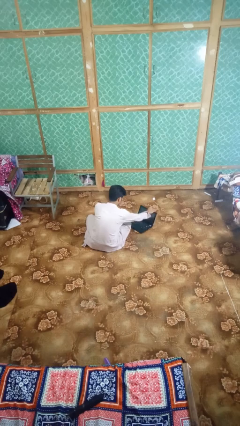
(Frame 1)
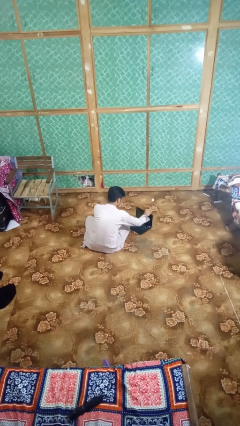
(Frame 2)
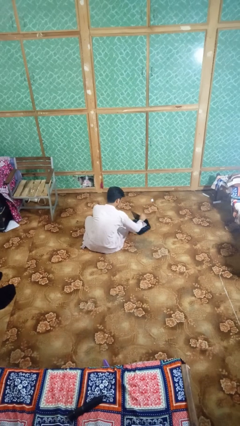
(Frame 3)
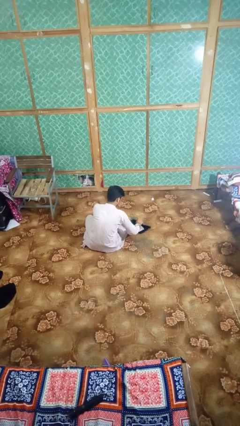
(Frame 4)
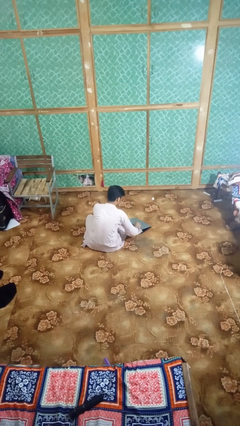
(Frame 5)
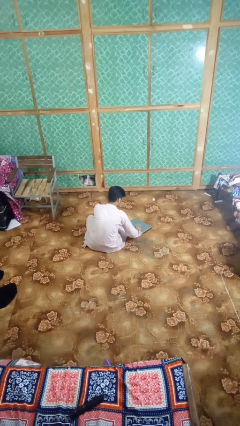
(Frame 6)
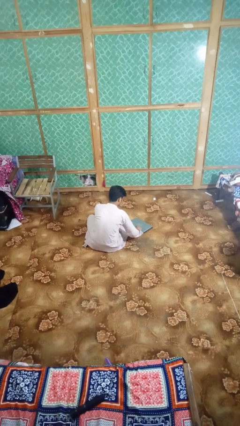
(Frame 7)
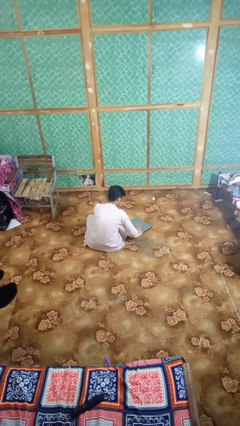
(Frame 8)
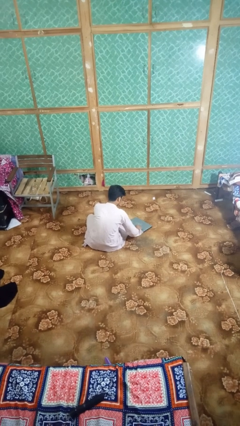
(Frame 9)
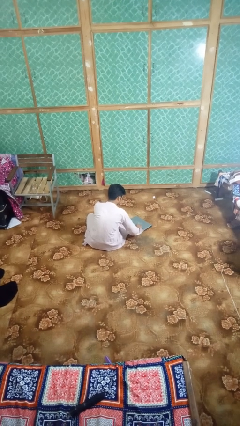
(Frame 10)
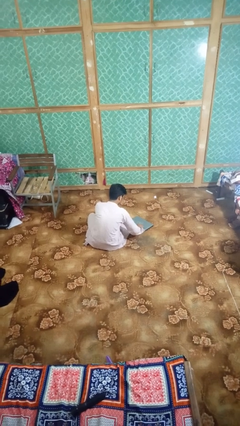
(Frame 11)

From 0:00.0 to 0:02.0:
person closes laptop

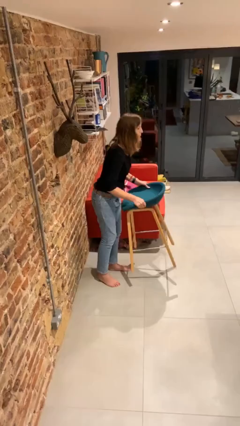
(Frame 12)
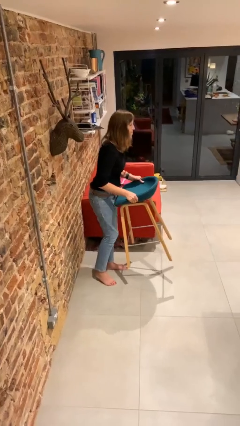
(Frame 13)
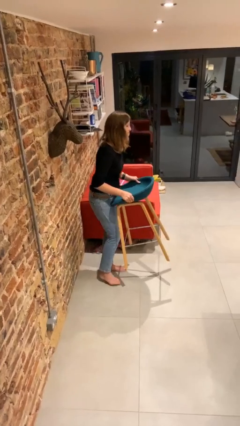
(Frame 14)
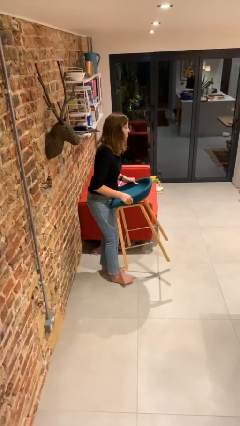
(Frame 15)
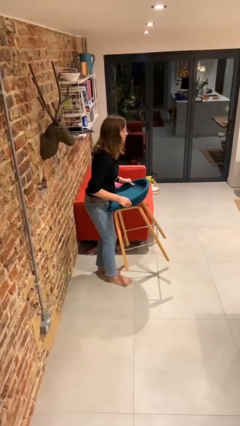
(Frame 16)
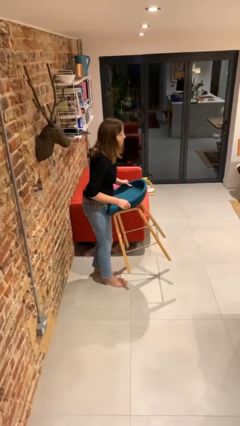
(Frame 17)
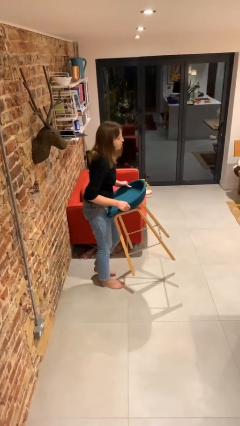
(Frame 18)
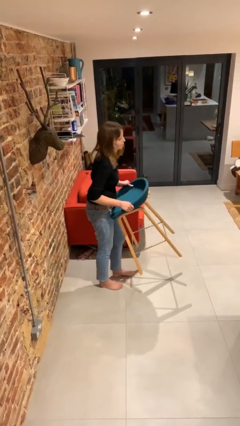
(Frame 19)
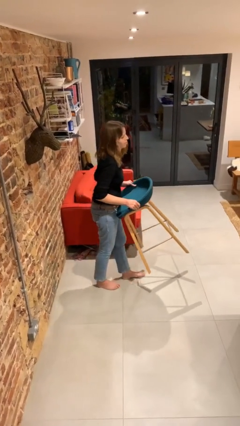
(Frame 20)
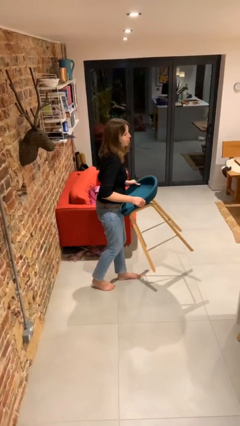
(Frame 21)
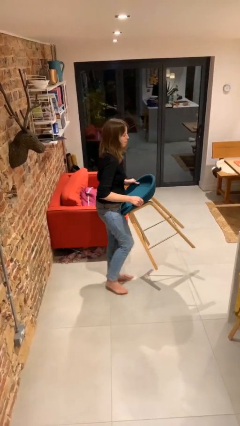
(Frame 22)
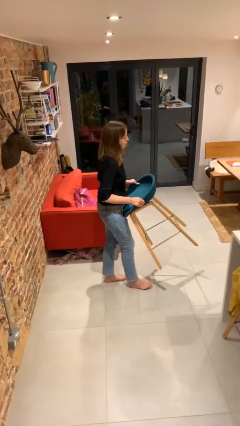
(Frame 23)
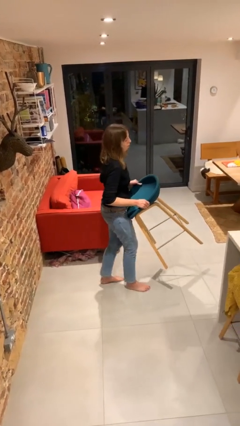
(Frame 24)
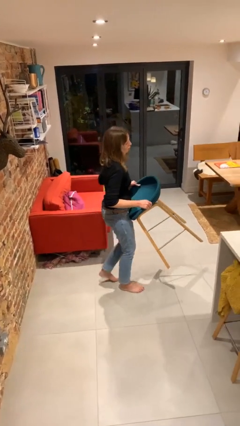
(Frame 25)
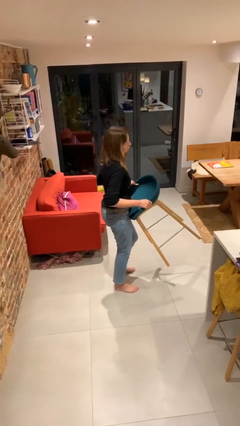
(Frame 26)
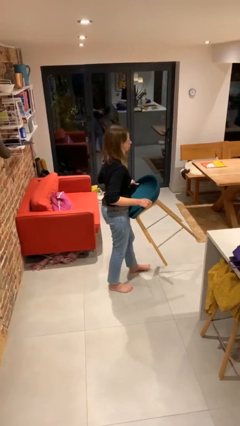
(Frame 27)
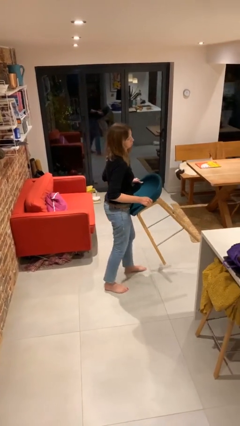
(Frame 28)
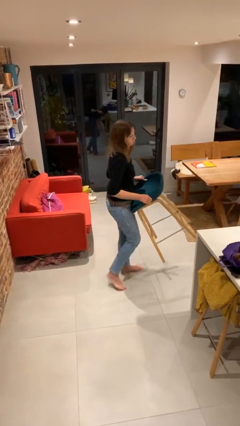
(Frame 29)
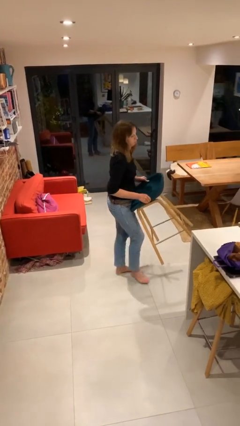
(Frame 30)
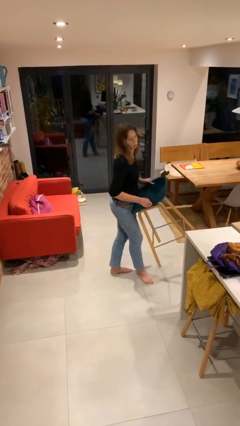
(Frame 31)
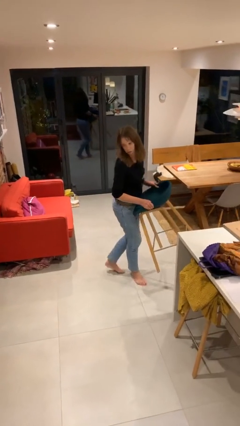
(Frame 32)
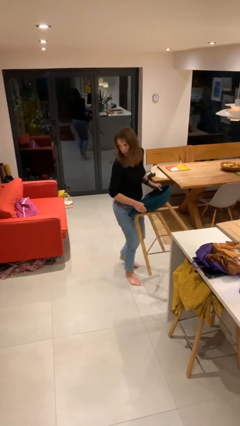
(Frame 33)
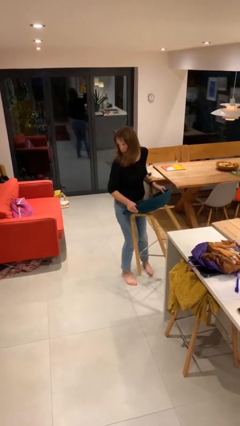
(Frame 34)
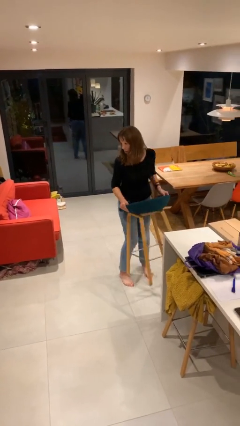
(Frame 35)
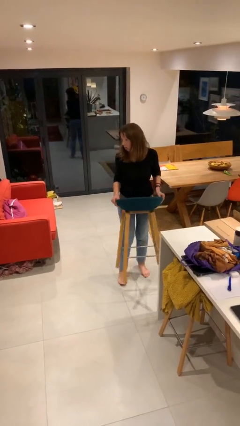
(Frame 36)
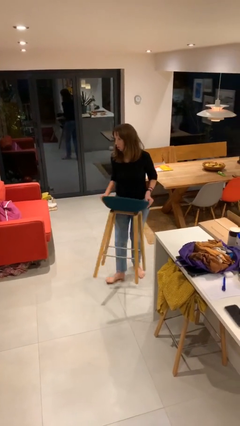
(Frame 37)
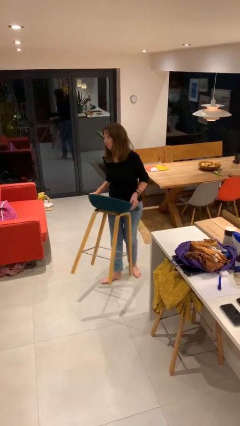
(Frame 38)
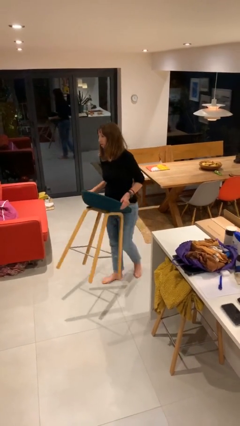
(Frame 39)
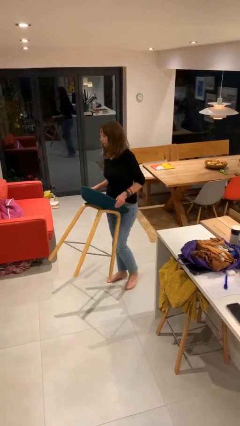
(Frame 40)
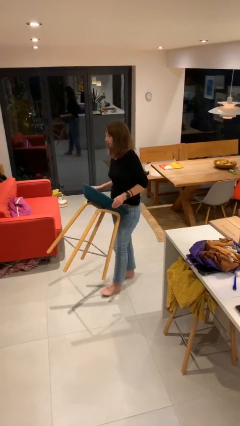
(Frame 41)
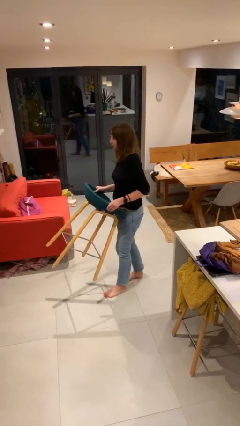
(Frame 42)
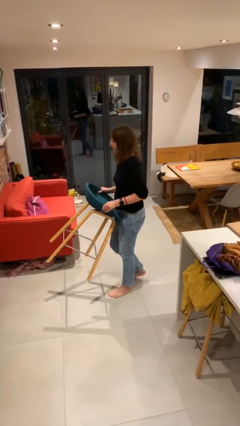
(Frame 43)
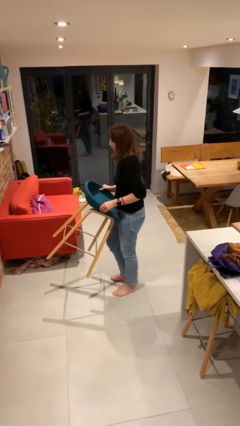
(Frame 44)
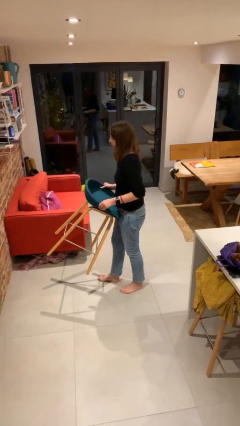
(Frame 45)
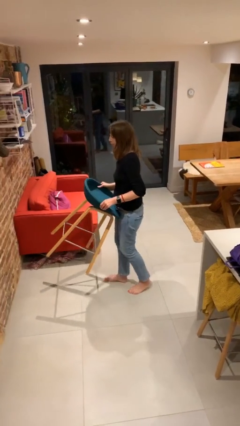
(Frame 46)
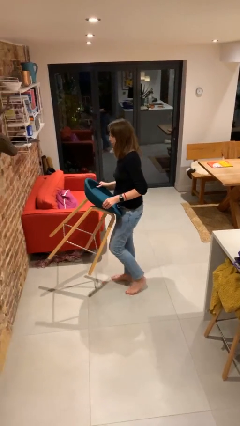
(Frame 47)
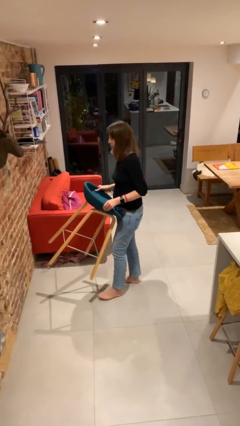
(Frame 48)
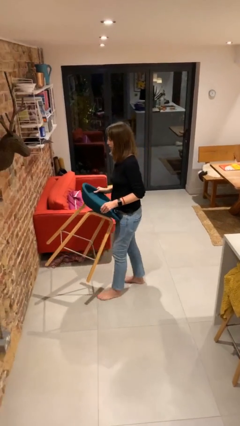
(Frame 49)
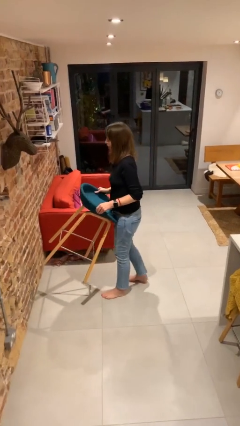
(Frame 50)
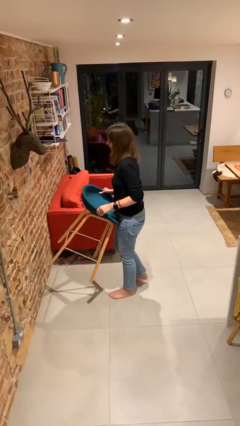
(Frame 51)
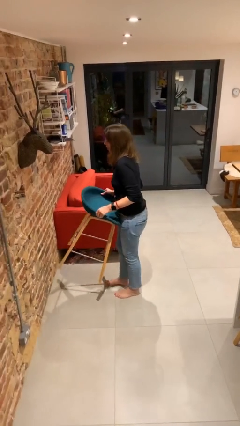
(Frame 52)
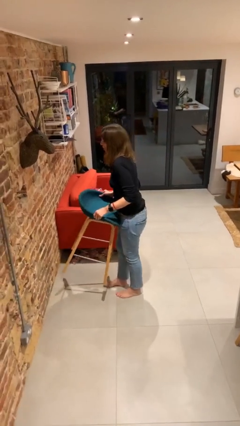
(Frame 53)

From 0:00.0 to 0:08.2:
person carries heavy object

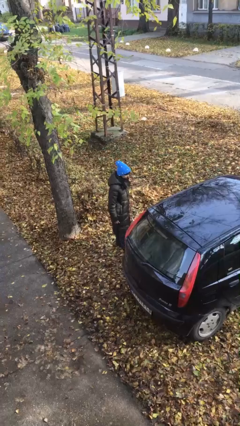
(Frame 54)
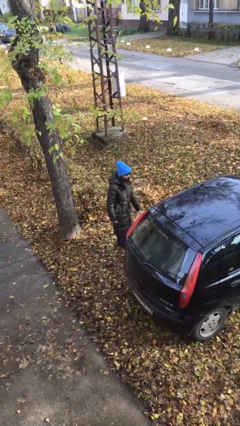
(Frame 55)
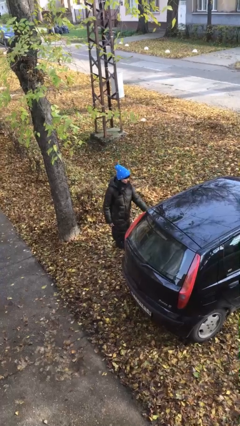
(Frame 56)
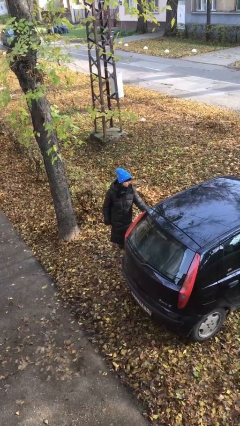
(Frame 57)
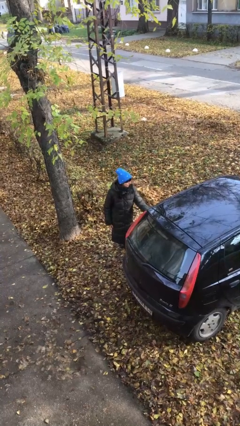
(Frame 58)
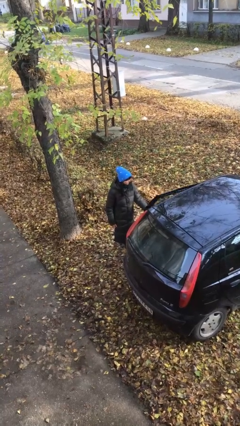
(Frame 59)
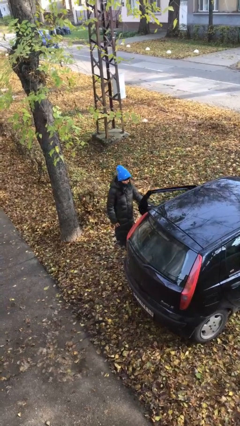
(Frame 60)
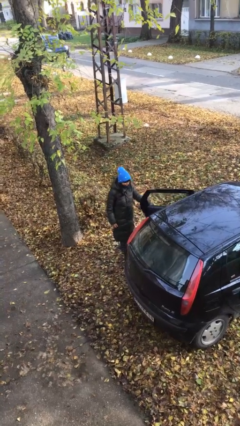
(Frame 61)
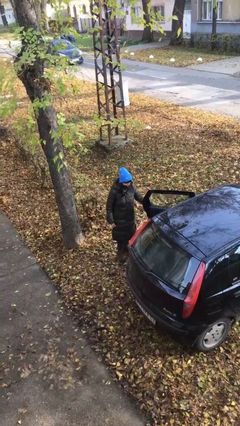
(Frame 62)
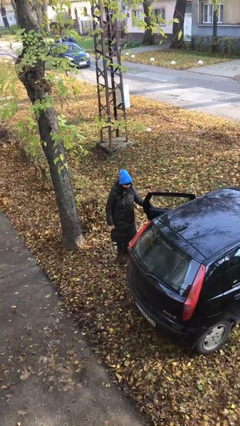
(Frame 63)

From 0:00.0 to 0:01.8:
person opens car door

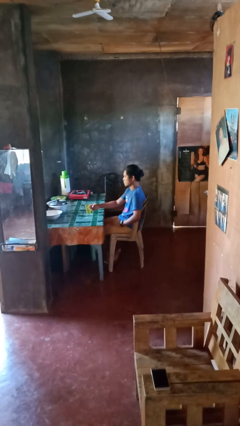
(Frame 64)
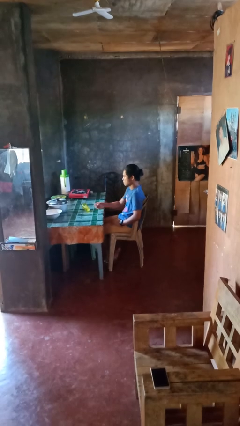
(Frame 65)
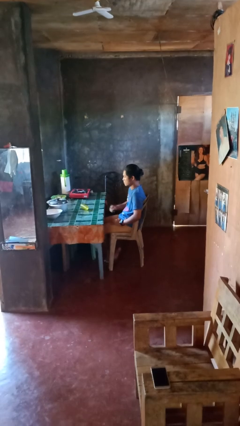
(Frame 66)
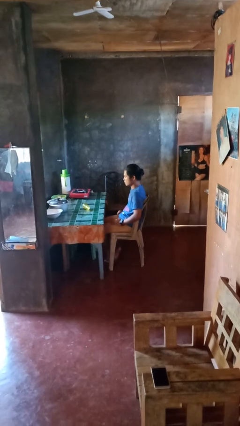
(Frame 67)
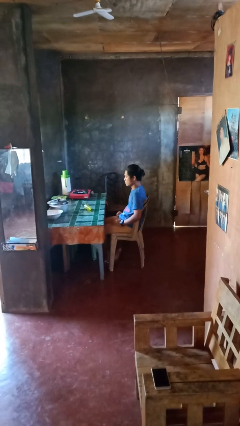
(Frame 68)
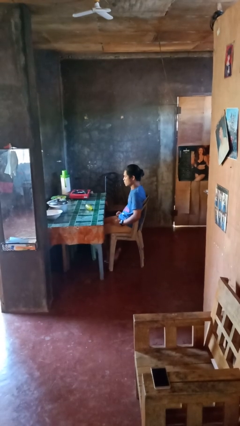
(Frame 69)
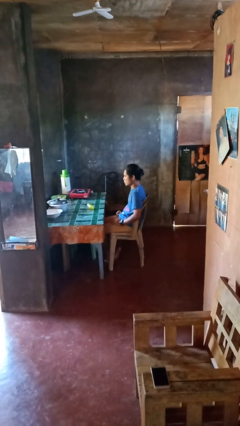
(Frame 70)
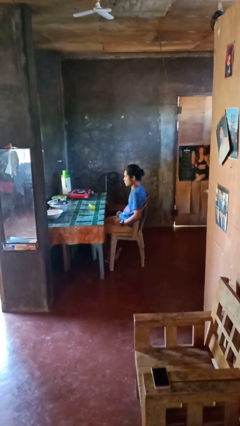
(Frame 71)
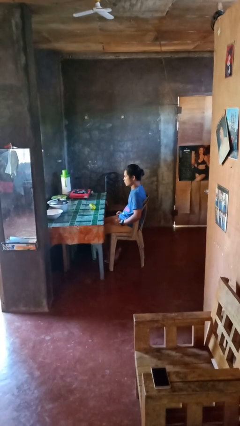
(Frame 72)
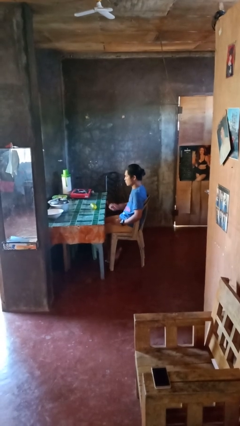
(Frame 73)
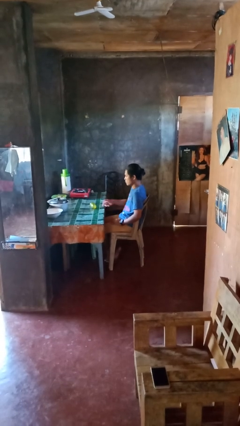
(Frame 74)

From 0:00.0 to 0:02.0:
person knocks over glass

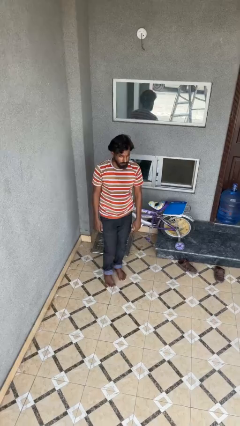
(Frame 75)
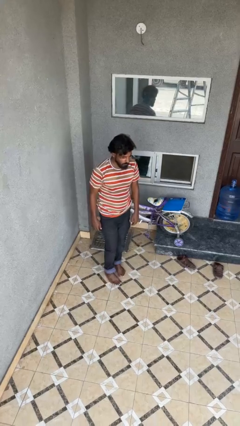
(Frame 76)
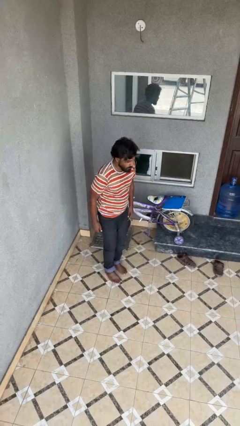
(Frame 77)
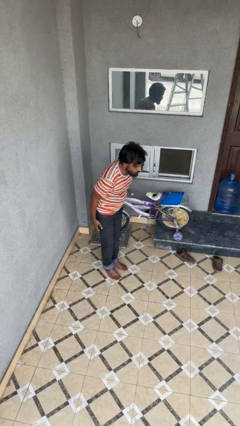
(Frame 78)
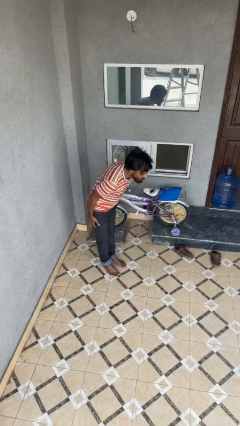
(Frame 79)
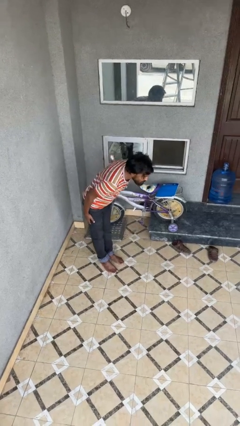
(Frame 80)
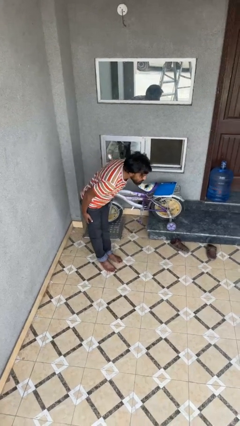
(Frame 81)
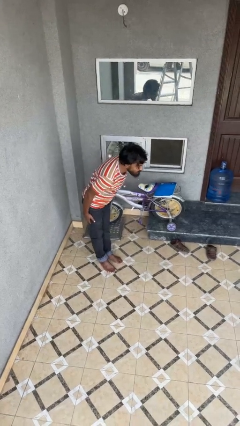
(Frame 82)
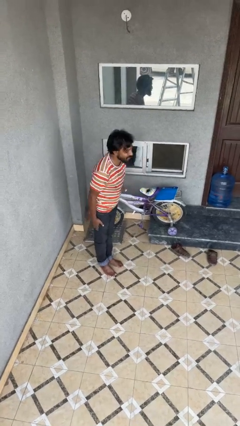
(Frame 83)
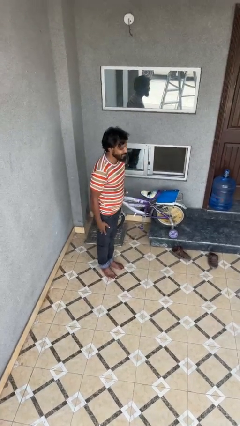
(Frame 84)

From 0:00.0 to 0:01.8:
person bows

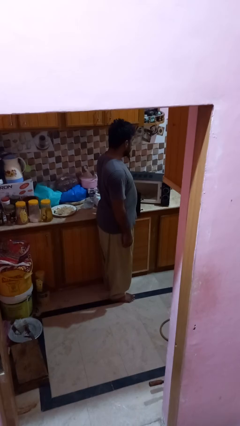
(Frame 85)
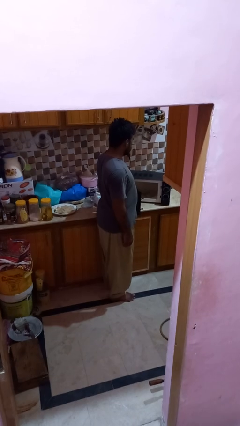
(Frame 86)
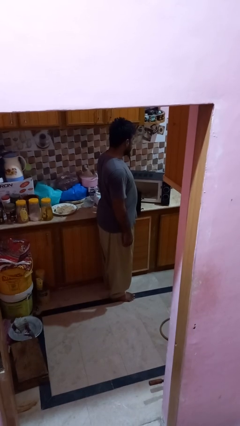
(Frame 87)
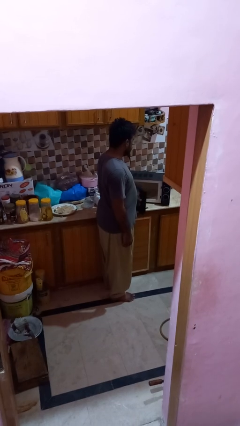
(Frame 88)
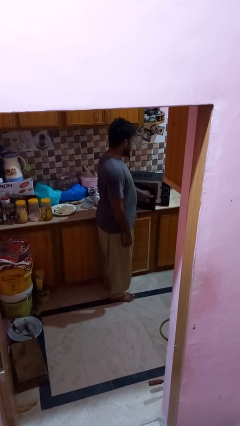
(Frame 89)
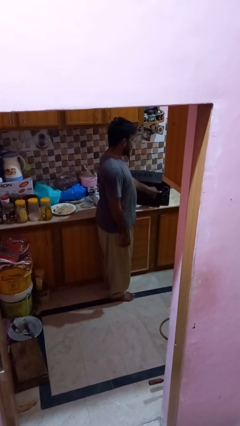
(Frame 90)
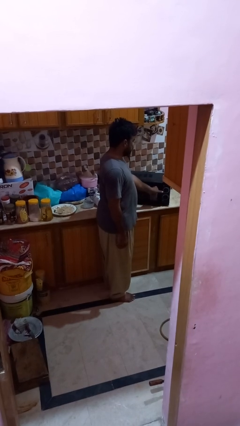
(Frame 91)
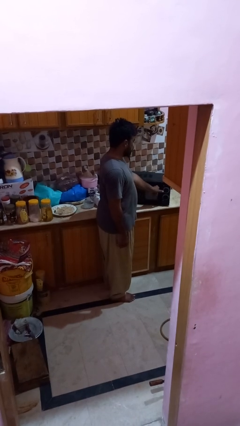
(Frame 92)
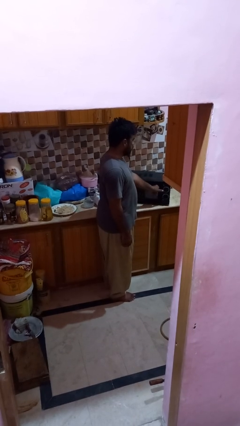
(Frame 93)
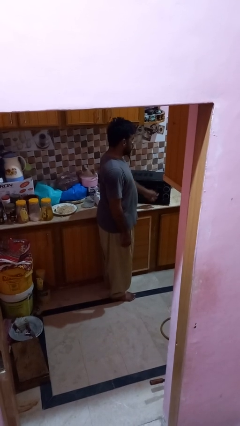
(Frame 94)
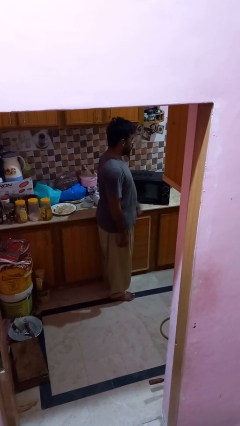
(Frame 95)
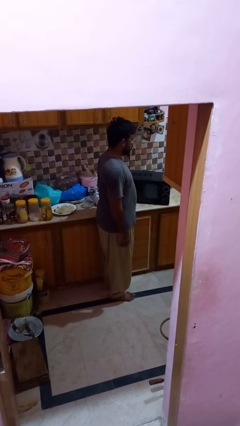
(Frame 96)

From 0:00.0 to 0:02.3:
person closes microwave
